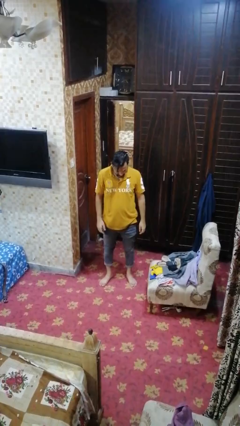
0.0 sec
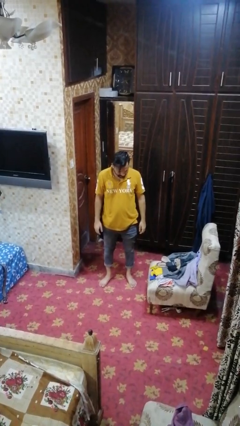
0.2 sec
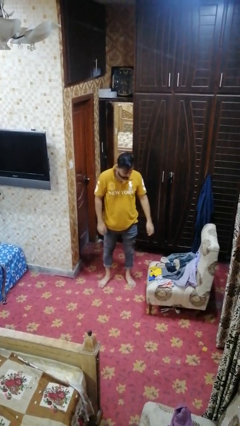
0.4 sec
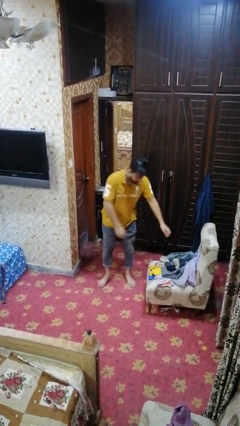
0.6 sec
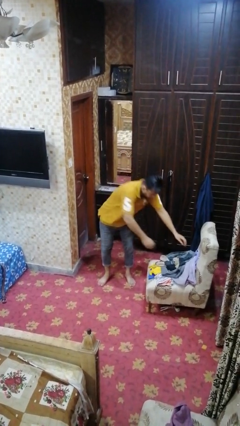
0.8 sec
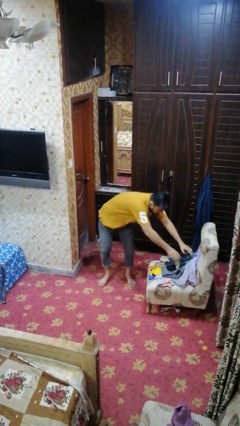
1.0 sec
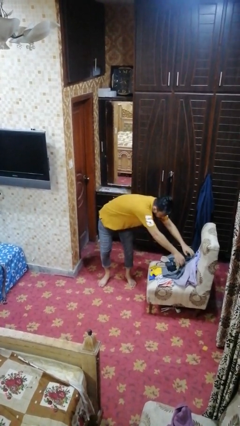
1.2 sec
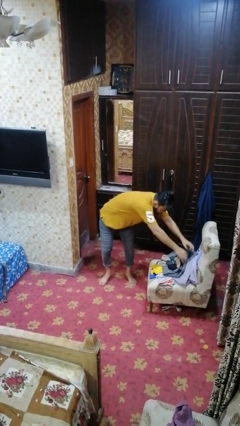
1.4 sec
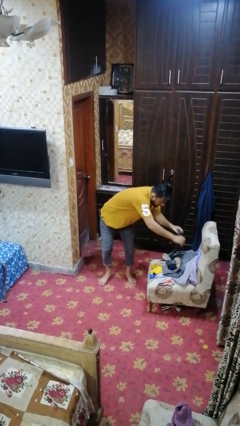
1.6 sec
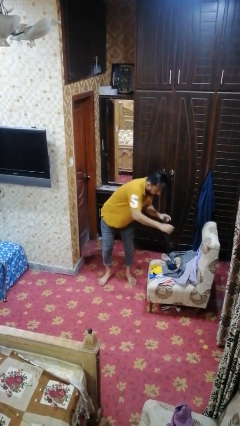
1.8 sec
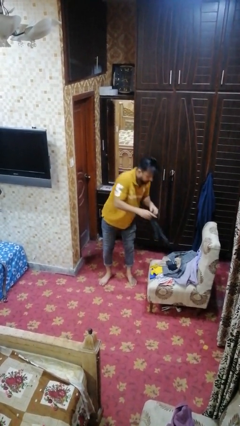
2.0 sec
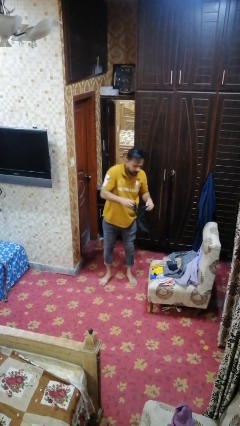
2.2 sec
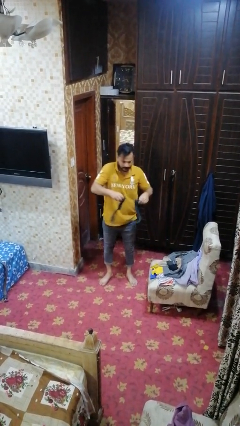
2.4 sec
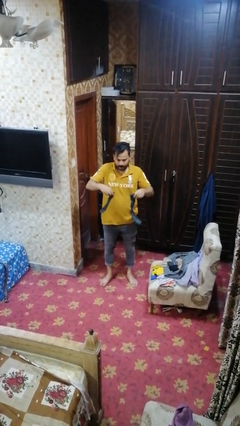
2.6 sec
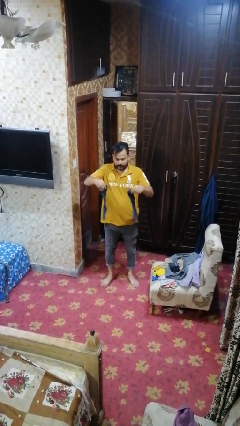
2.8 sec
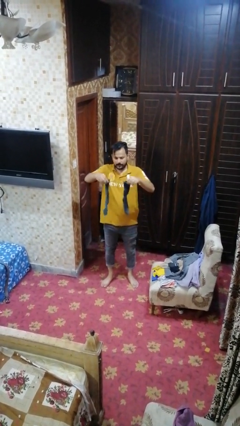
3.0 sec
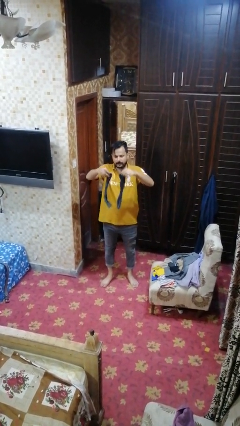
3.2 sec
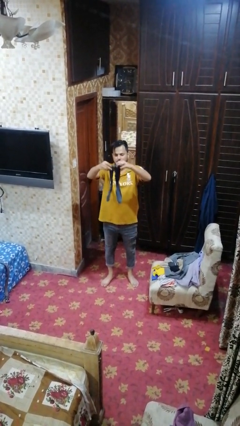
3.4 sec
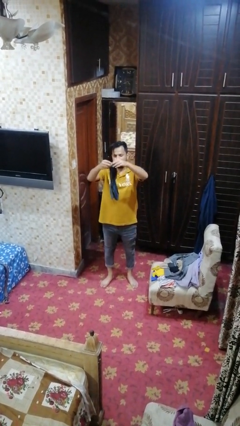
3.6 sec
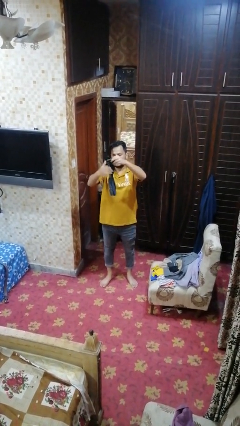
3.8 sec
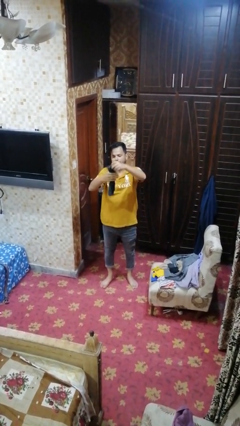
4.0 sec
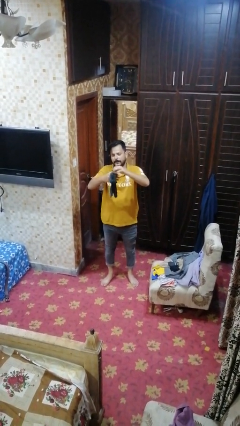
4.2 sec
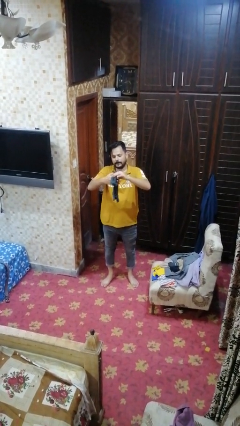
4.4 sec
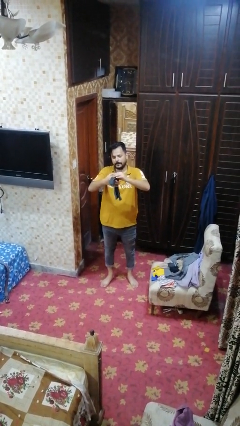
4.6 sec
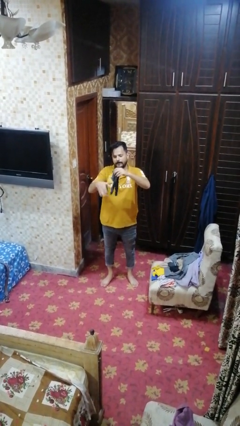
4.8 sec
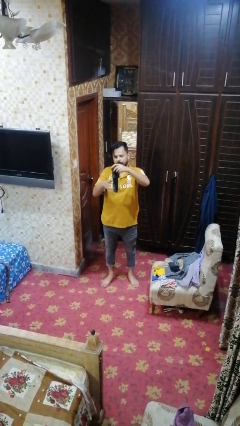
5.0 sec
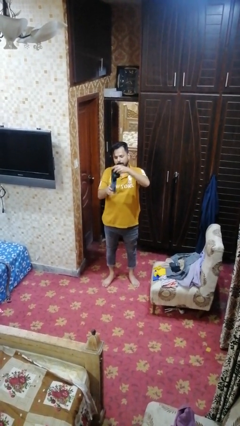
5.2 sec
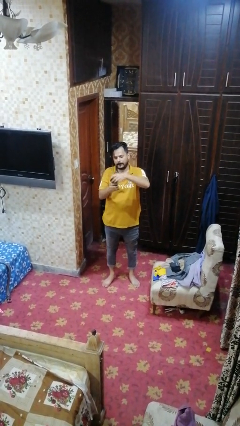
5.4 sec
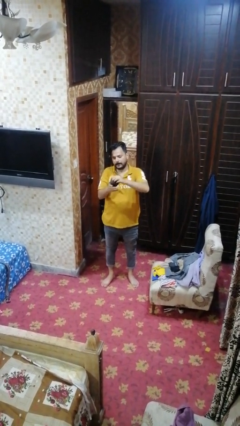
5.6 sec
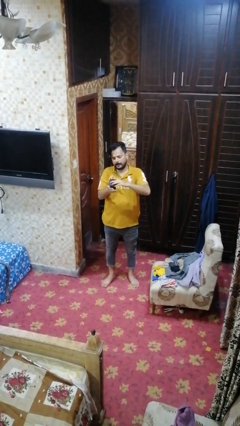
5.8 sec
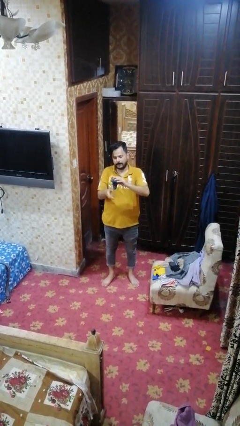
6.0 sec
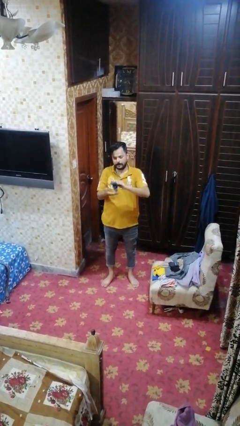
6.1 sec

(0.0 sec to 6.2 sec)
person folds socks

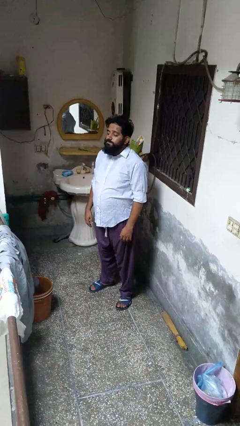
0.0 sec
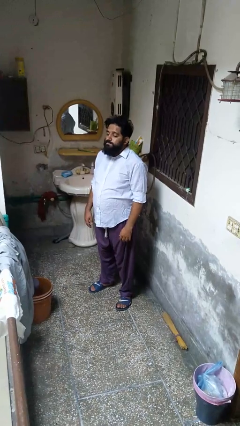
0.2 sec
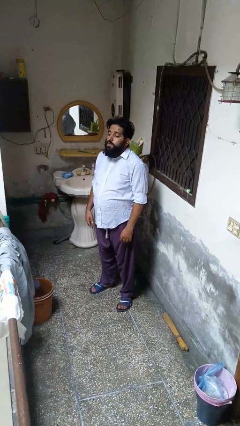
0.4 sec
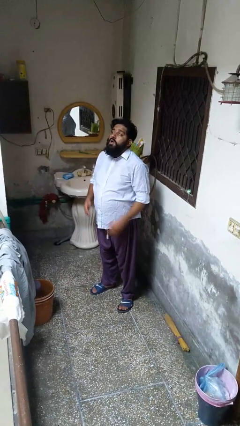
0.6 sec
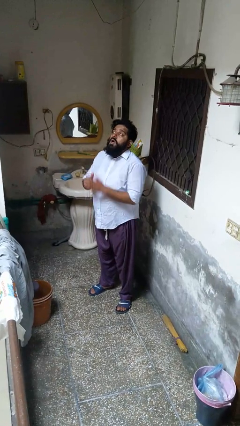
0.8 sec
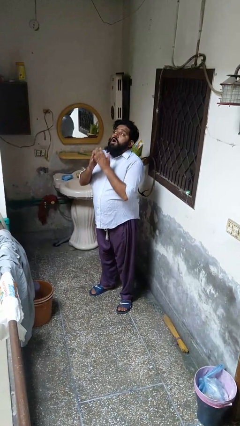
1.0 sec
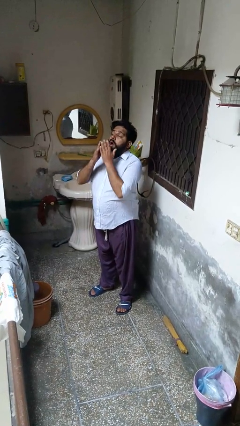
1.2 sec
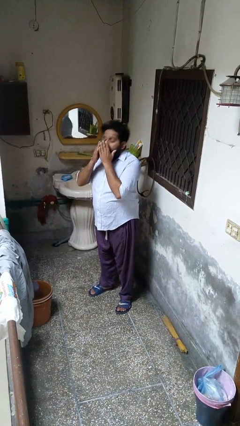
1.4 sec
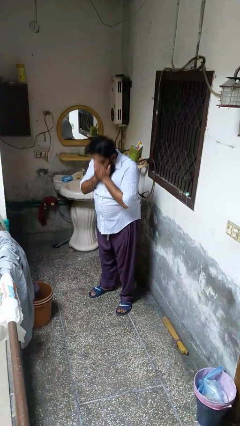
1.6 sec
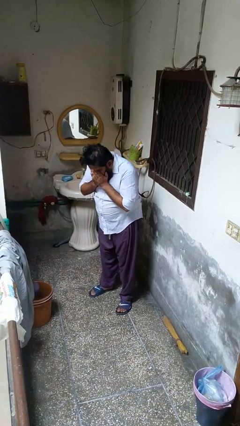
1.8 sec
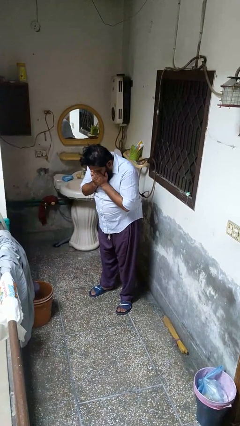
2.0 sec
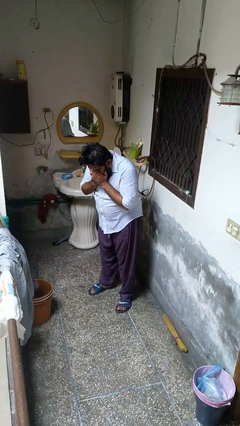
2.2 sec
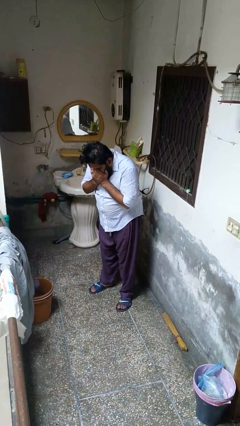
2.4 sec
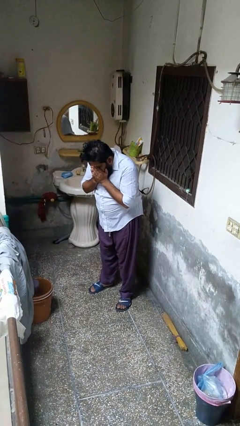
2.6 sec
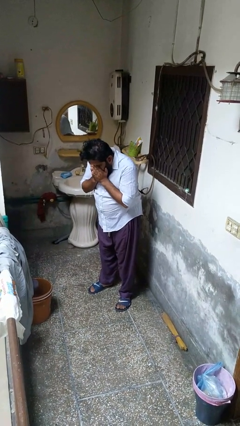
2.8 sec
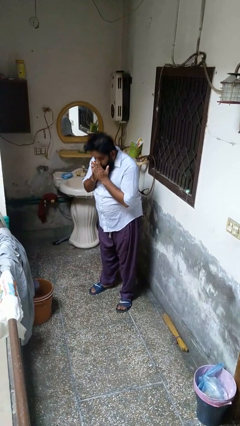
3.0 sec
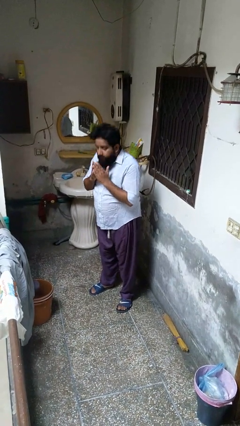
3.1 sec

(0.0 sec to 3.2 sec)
person sneezes into hand

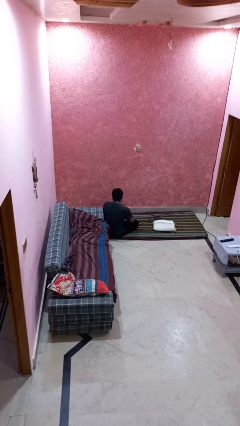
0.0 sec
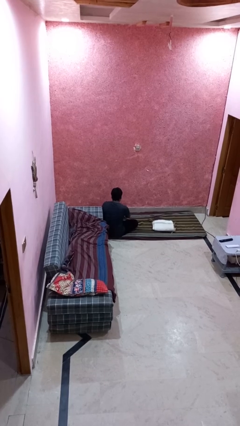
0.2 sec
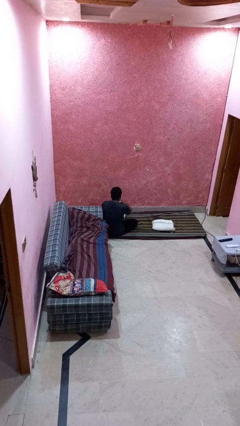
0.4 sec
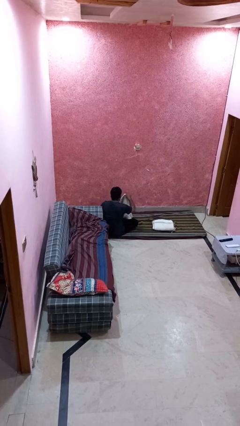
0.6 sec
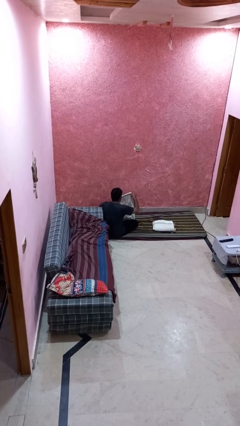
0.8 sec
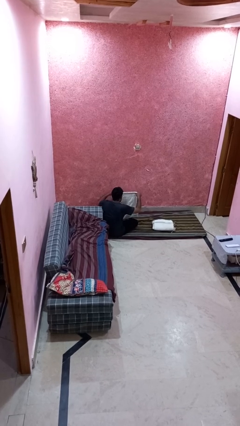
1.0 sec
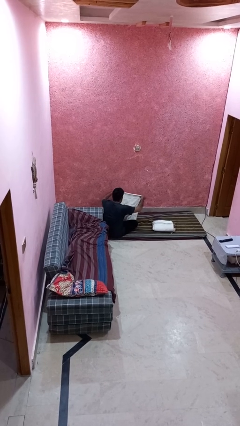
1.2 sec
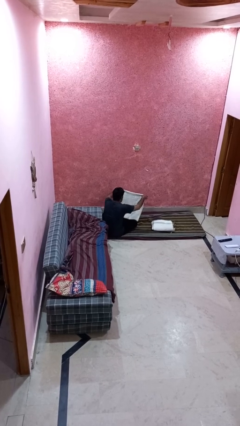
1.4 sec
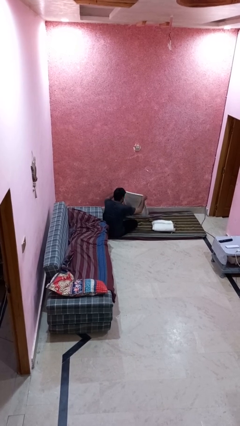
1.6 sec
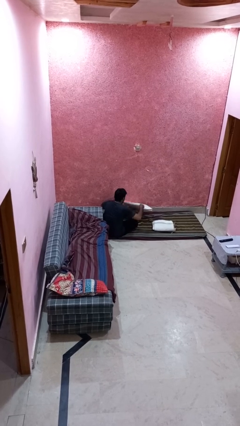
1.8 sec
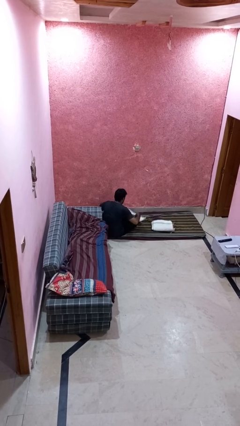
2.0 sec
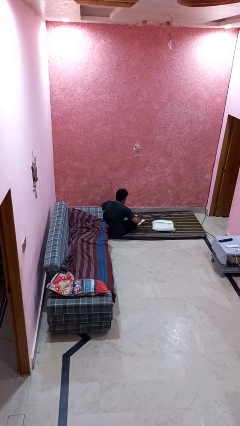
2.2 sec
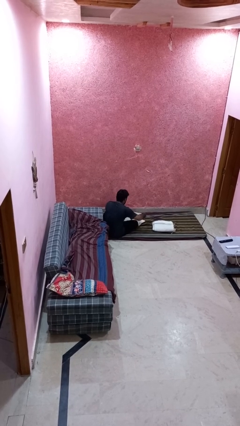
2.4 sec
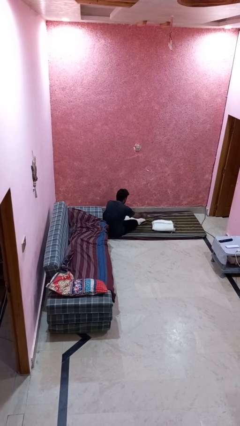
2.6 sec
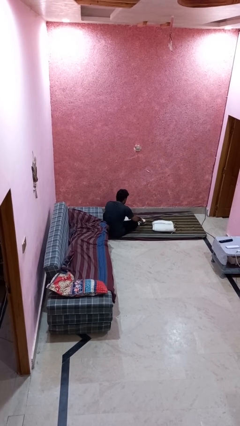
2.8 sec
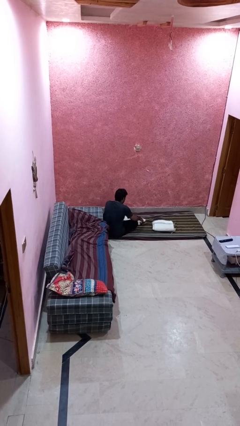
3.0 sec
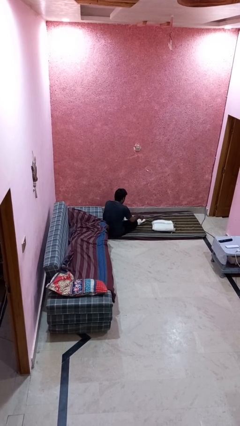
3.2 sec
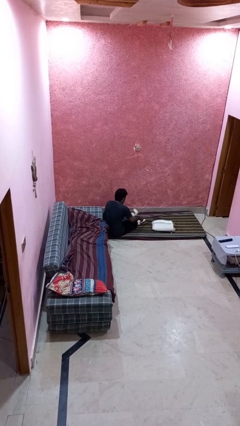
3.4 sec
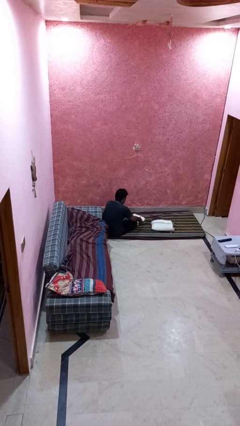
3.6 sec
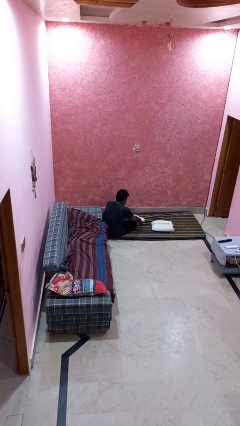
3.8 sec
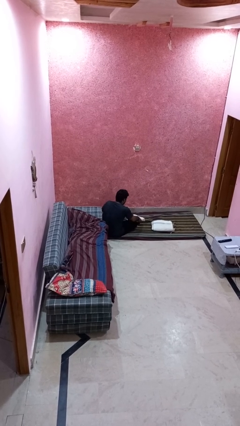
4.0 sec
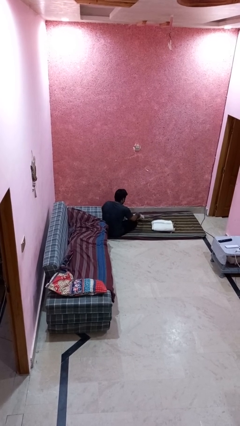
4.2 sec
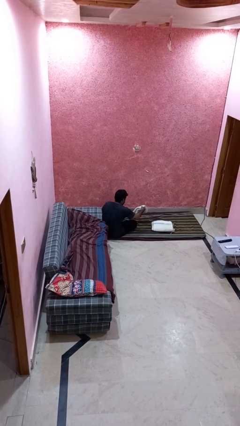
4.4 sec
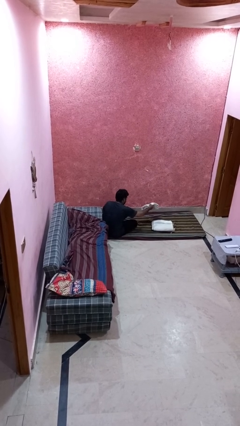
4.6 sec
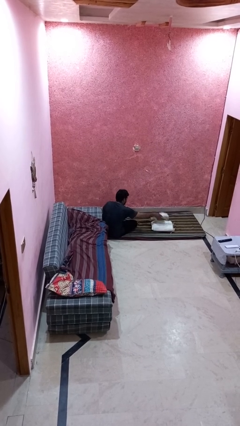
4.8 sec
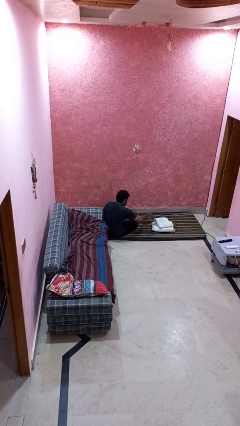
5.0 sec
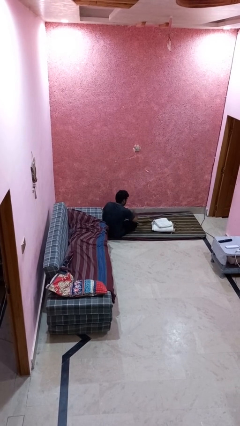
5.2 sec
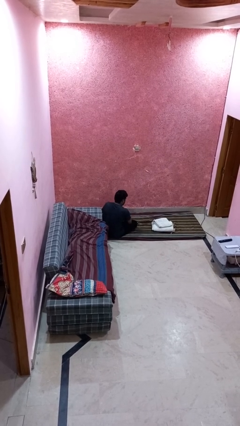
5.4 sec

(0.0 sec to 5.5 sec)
person folds towel

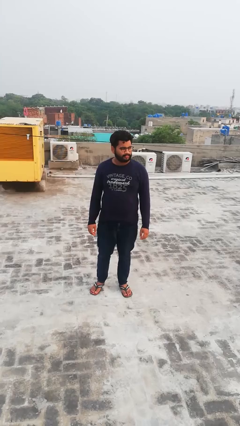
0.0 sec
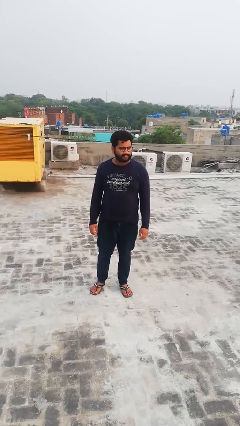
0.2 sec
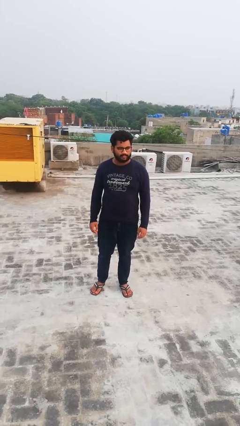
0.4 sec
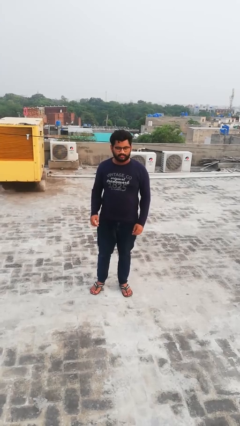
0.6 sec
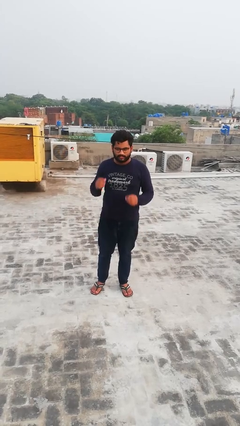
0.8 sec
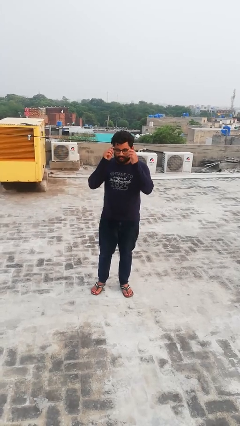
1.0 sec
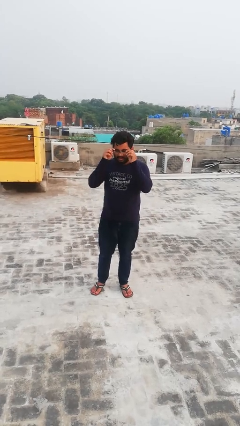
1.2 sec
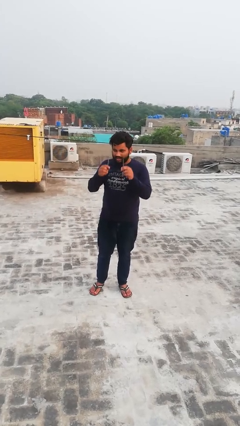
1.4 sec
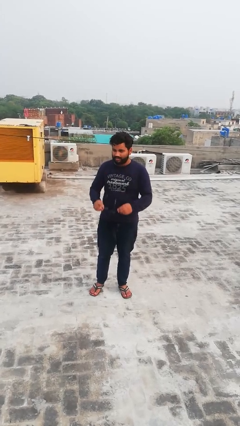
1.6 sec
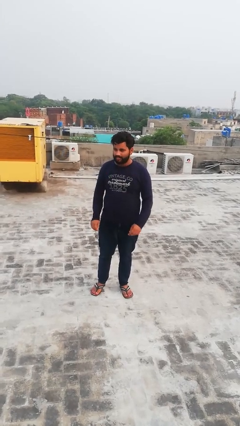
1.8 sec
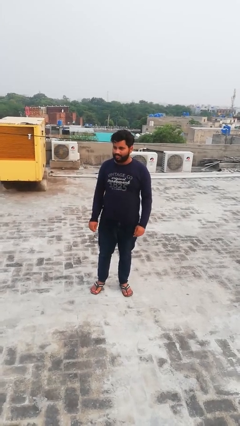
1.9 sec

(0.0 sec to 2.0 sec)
person takes off glasses

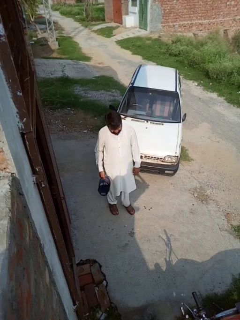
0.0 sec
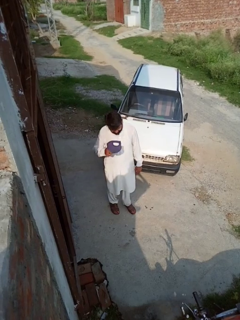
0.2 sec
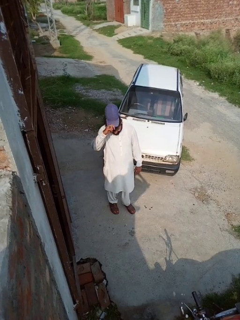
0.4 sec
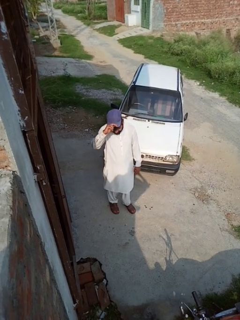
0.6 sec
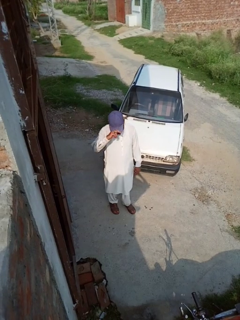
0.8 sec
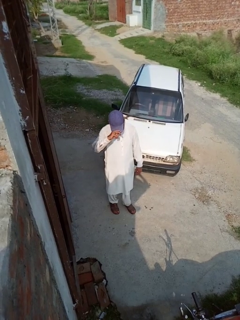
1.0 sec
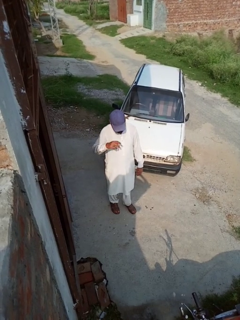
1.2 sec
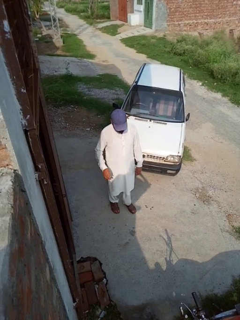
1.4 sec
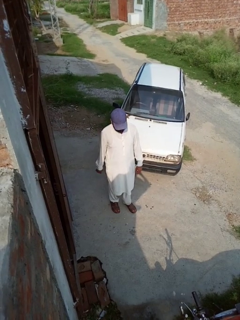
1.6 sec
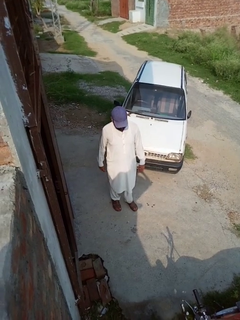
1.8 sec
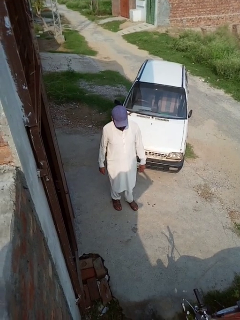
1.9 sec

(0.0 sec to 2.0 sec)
person puts on hat
